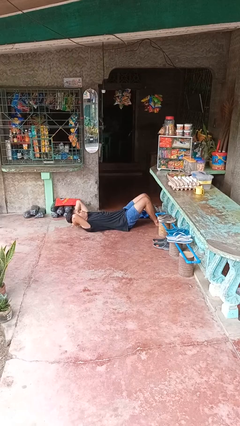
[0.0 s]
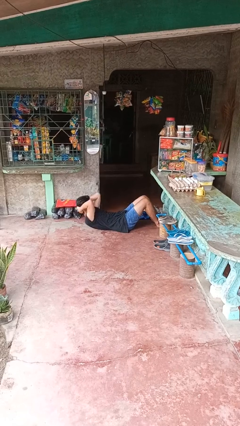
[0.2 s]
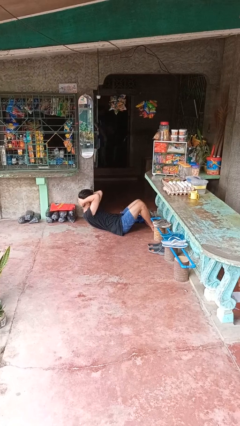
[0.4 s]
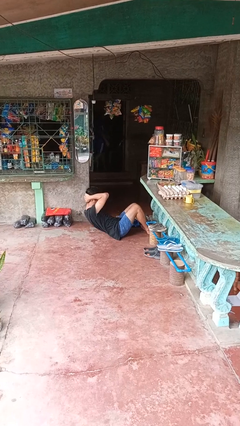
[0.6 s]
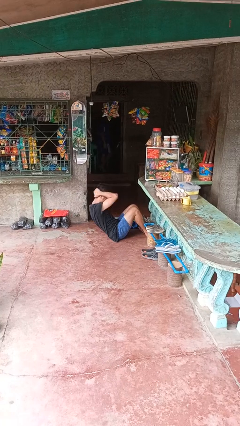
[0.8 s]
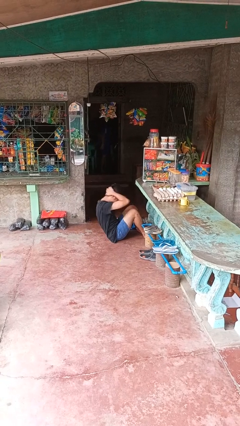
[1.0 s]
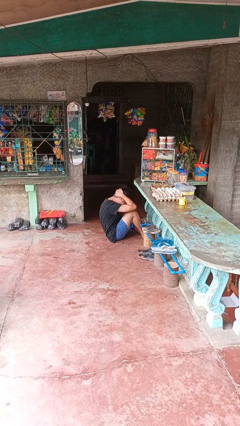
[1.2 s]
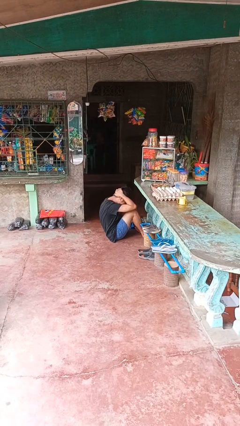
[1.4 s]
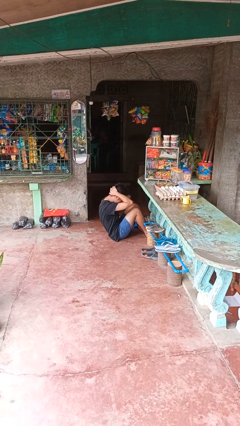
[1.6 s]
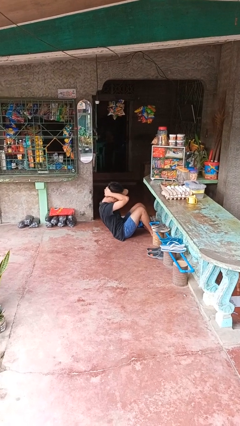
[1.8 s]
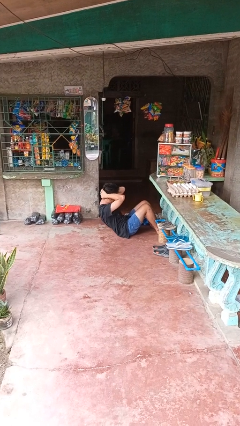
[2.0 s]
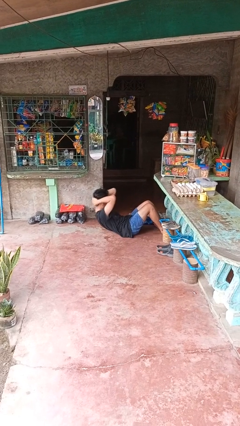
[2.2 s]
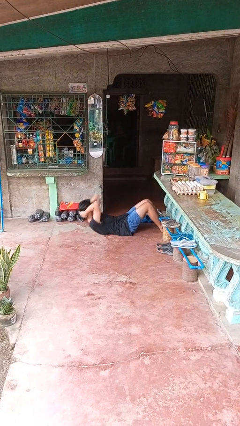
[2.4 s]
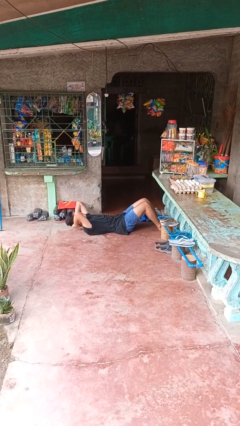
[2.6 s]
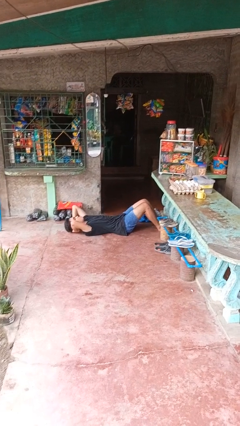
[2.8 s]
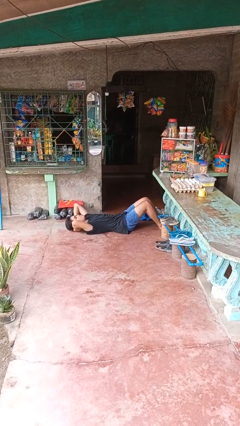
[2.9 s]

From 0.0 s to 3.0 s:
person exercises with situp

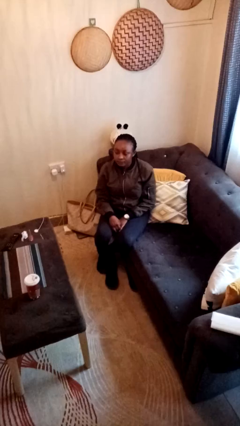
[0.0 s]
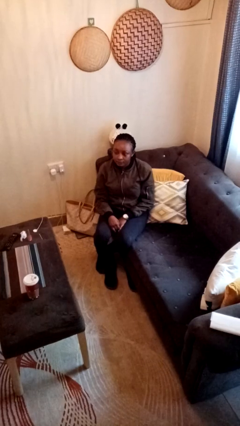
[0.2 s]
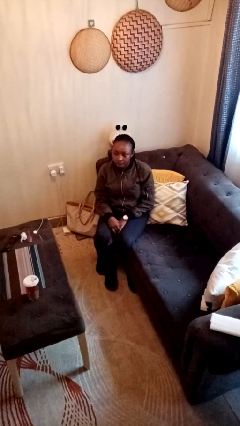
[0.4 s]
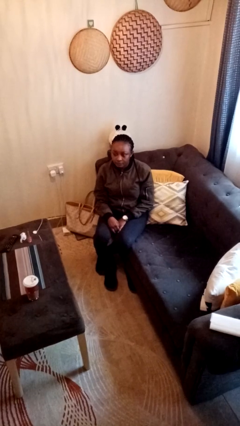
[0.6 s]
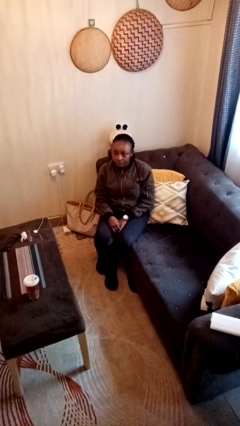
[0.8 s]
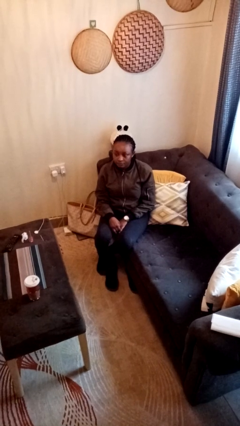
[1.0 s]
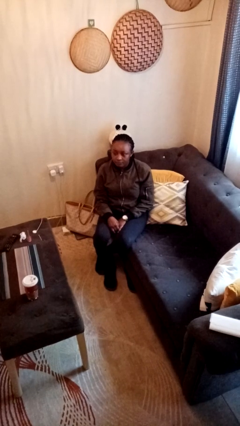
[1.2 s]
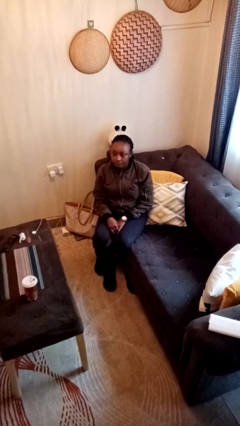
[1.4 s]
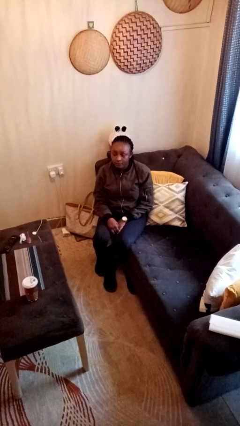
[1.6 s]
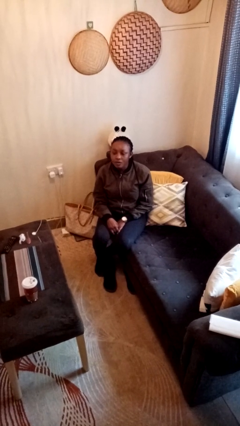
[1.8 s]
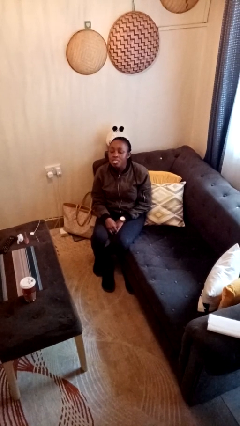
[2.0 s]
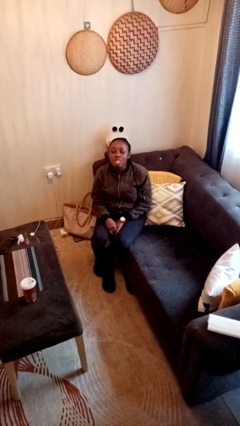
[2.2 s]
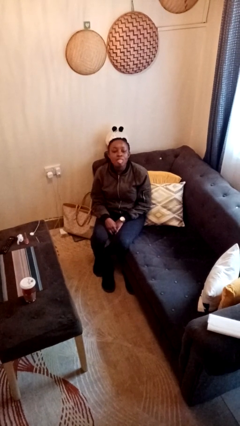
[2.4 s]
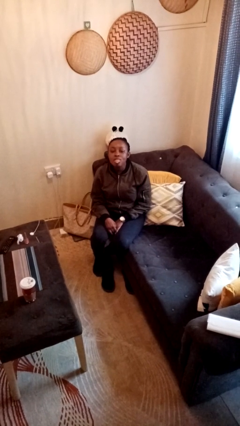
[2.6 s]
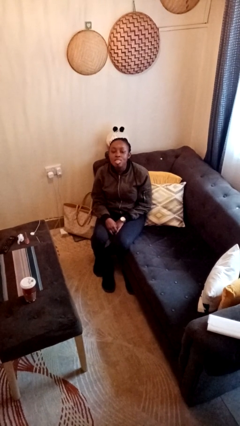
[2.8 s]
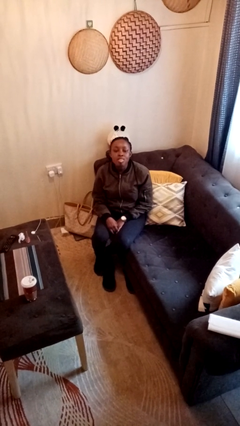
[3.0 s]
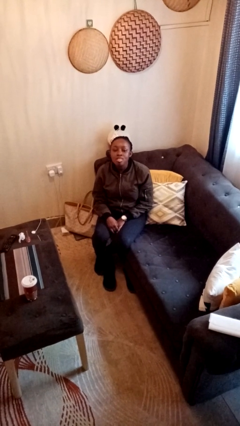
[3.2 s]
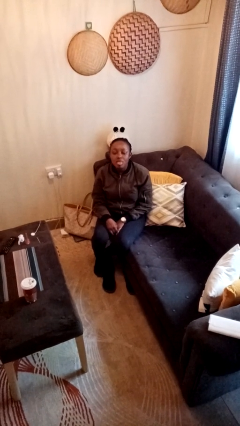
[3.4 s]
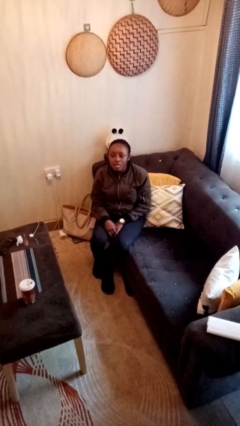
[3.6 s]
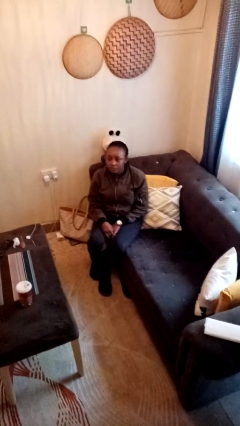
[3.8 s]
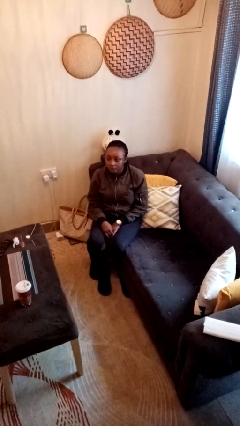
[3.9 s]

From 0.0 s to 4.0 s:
person sticks out tongue

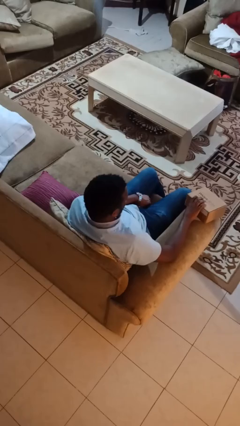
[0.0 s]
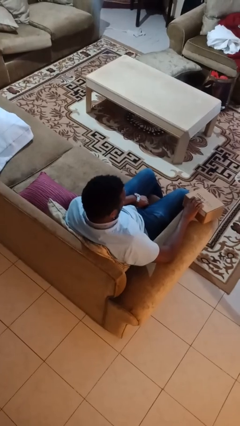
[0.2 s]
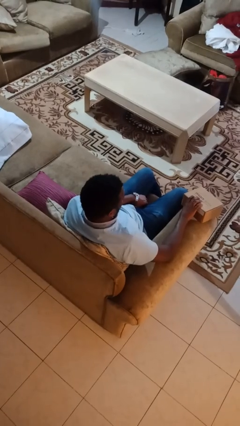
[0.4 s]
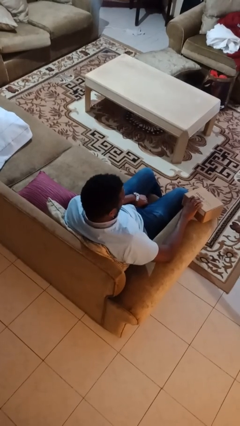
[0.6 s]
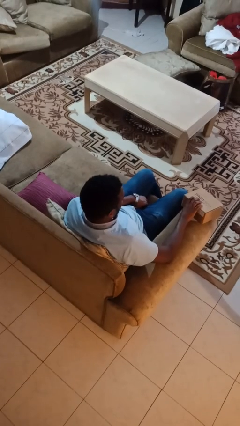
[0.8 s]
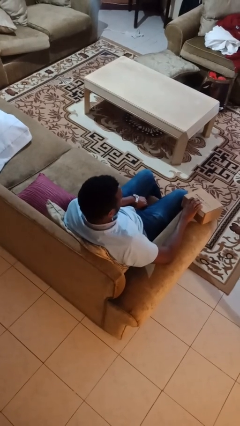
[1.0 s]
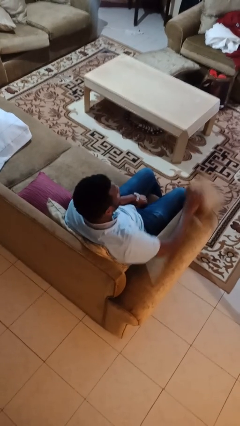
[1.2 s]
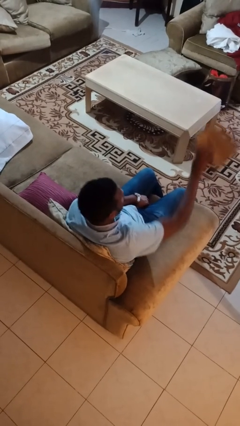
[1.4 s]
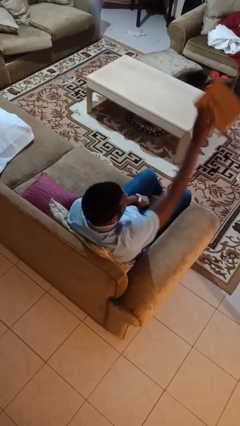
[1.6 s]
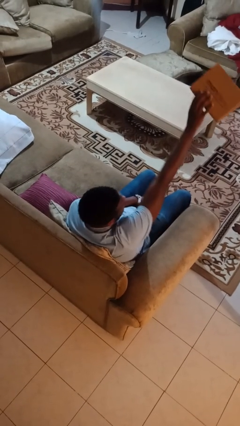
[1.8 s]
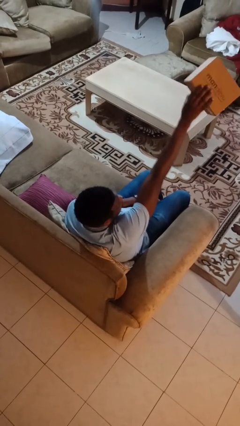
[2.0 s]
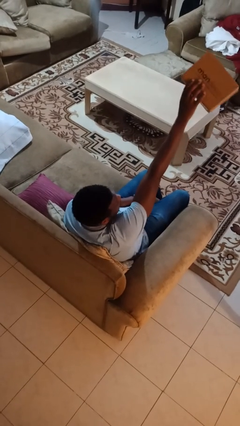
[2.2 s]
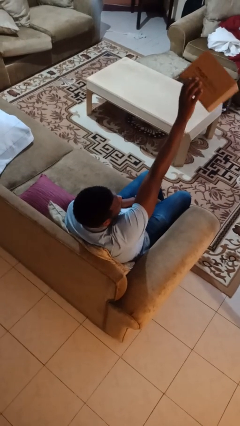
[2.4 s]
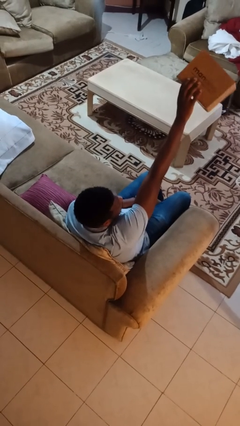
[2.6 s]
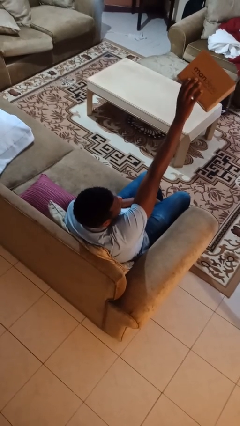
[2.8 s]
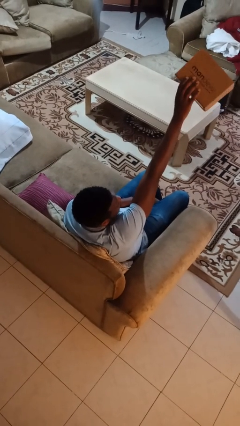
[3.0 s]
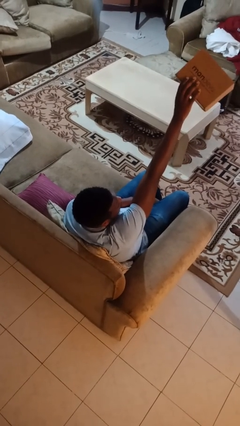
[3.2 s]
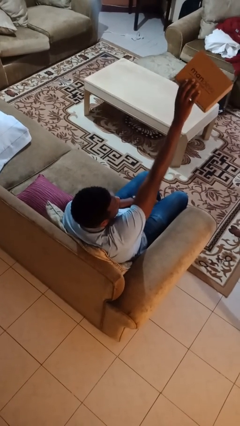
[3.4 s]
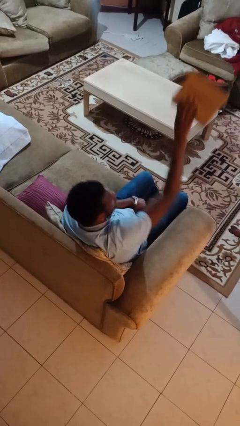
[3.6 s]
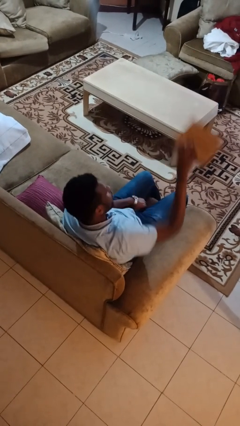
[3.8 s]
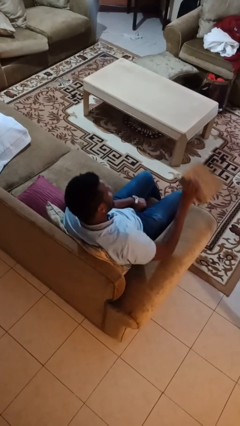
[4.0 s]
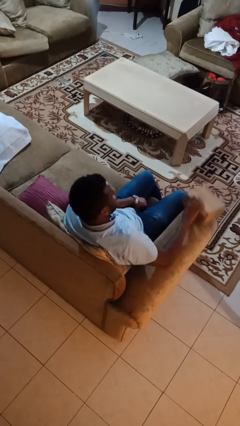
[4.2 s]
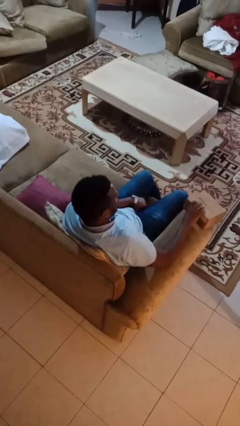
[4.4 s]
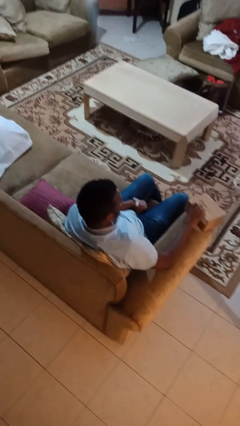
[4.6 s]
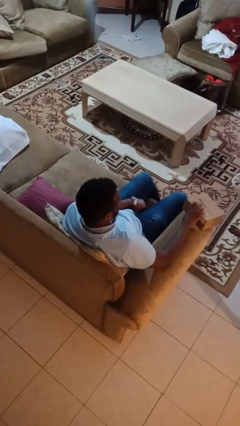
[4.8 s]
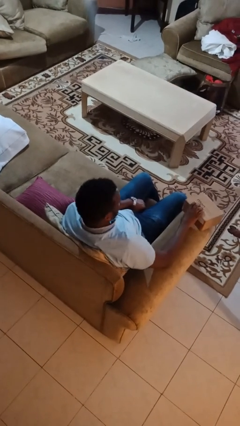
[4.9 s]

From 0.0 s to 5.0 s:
person holds object above head

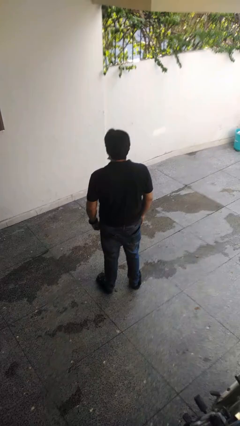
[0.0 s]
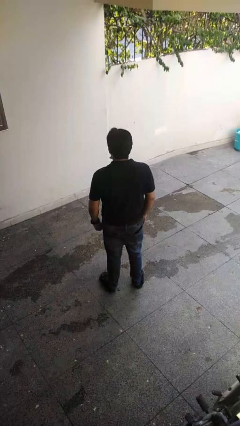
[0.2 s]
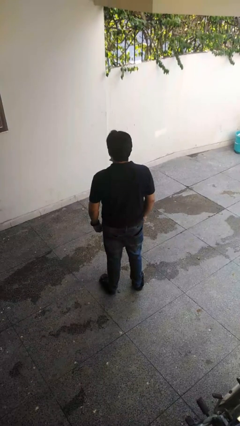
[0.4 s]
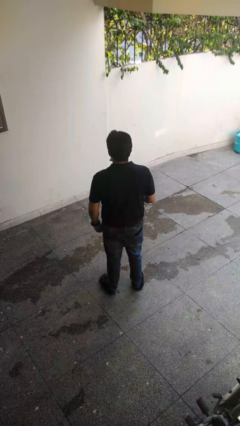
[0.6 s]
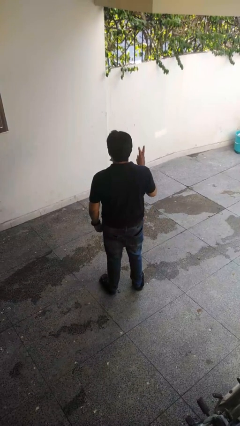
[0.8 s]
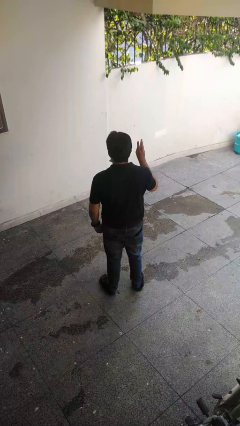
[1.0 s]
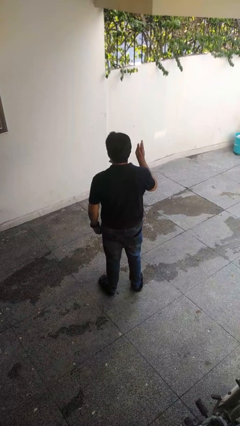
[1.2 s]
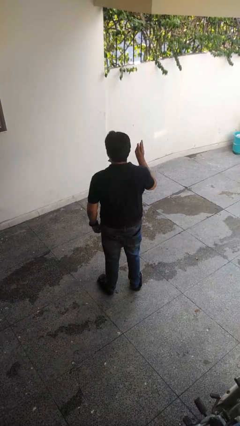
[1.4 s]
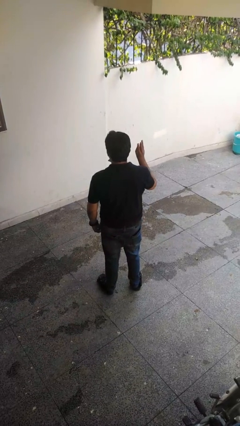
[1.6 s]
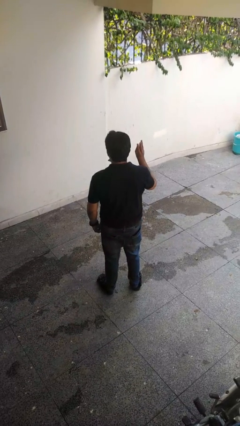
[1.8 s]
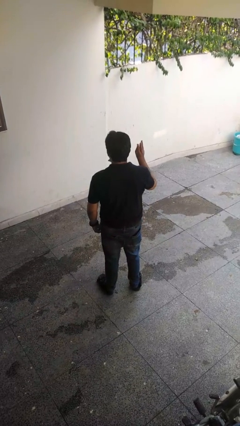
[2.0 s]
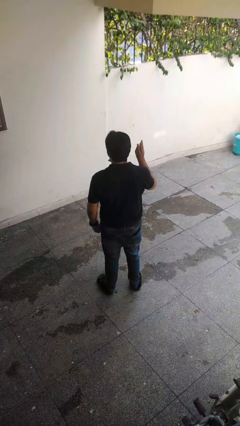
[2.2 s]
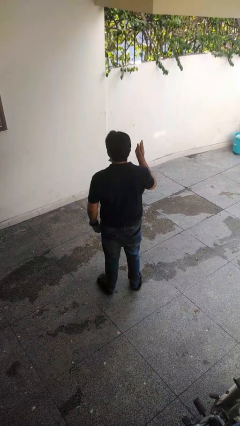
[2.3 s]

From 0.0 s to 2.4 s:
person gestures number three

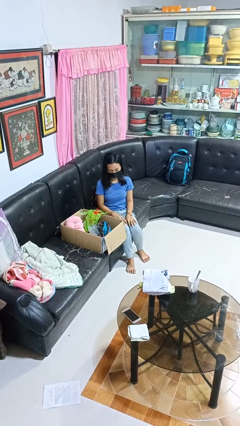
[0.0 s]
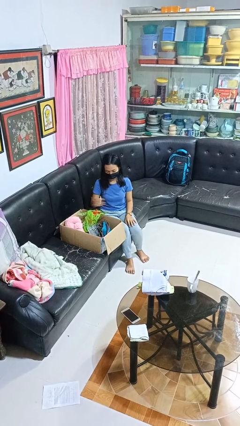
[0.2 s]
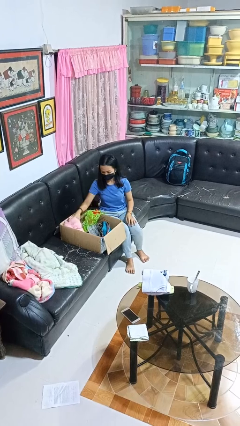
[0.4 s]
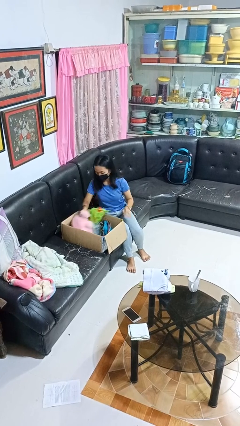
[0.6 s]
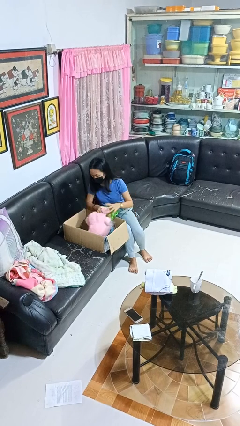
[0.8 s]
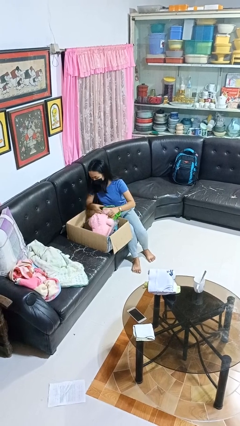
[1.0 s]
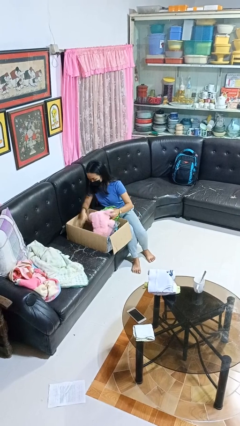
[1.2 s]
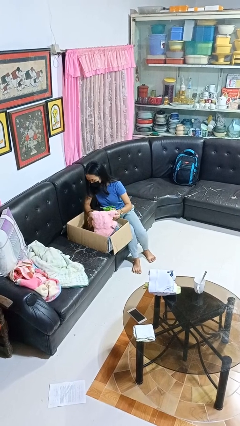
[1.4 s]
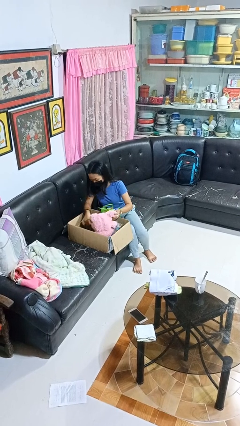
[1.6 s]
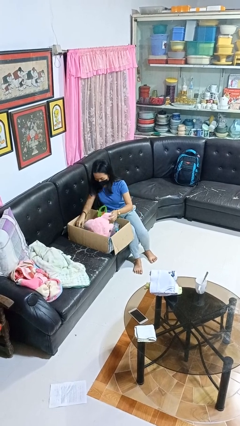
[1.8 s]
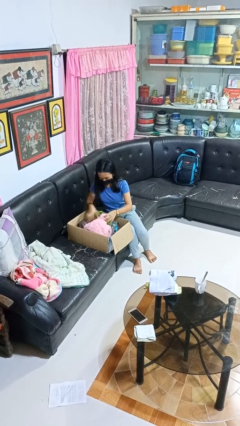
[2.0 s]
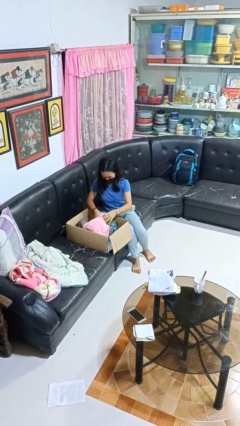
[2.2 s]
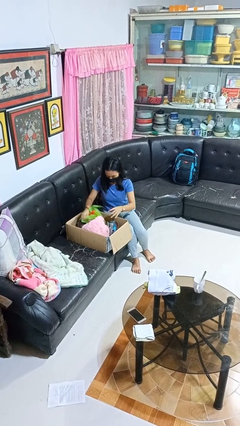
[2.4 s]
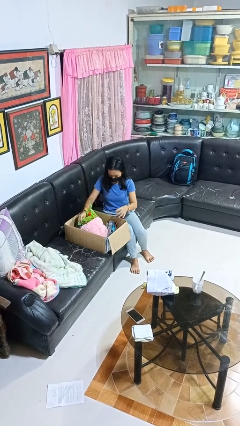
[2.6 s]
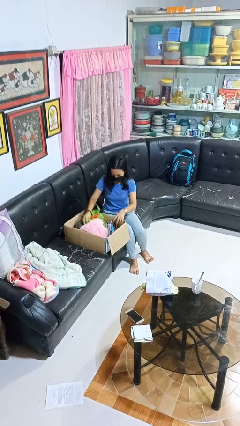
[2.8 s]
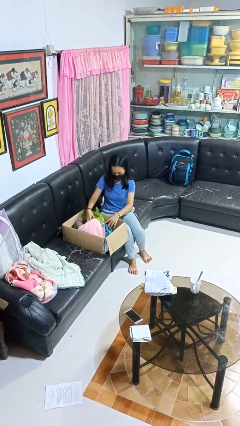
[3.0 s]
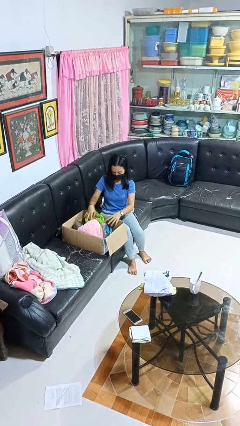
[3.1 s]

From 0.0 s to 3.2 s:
person searches in box

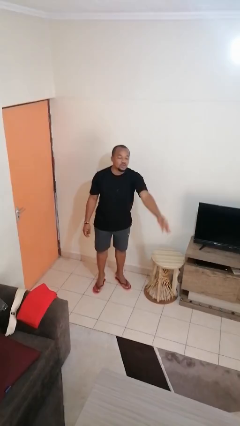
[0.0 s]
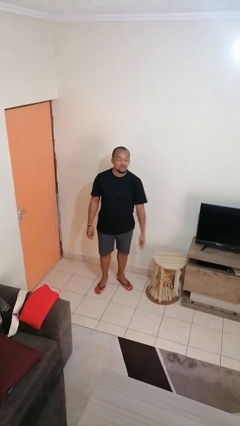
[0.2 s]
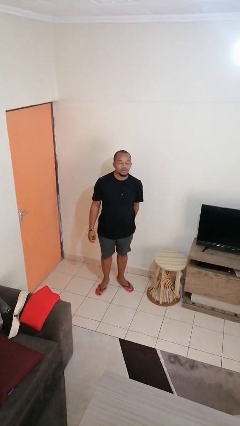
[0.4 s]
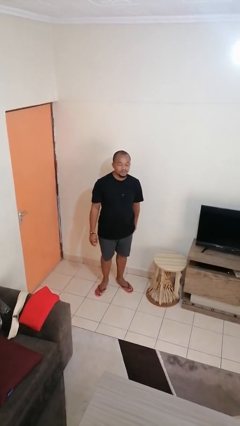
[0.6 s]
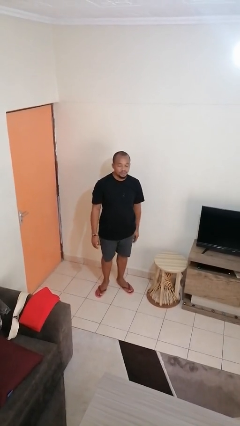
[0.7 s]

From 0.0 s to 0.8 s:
person gestures blow kiss
